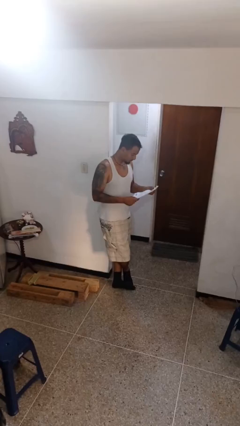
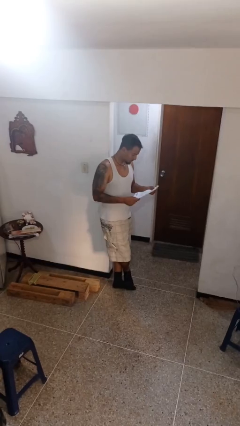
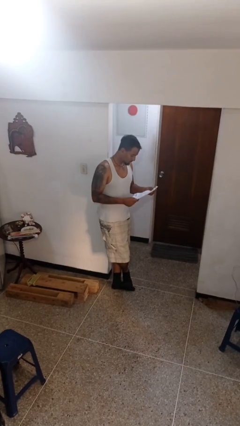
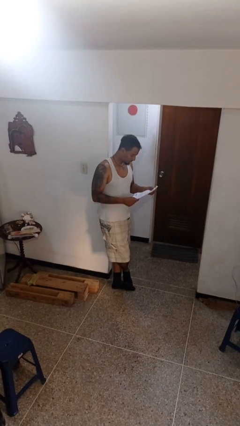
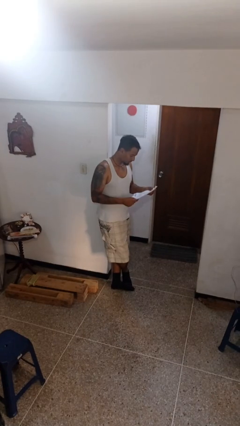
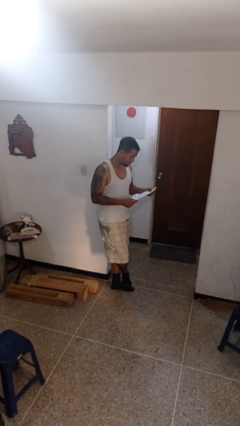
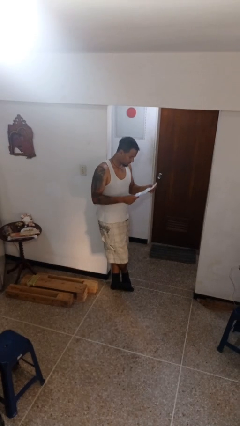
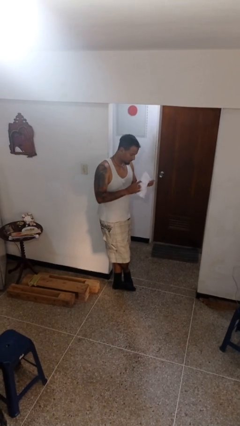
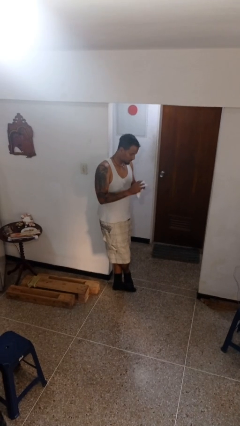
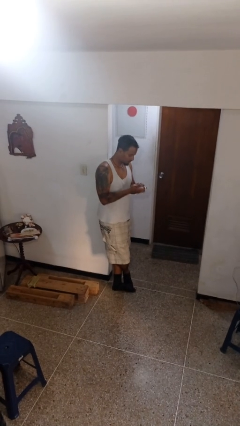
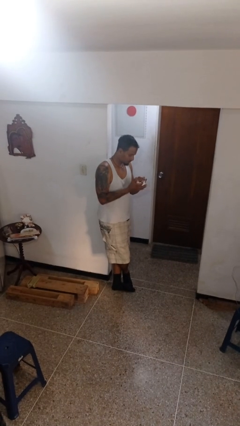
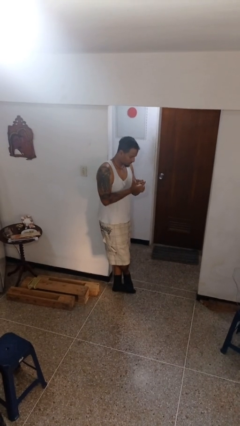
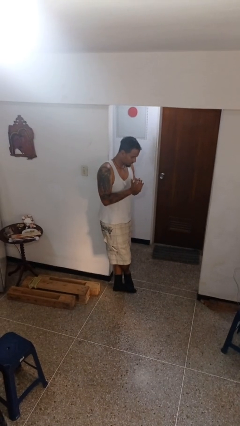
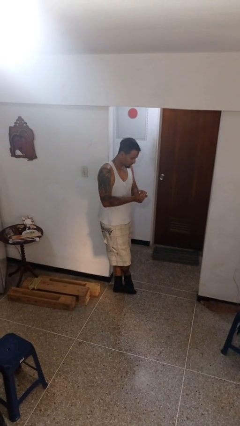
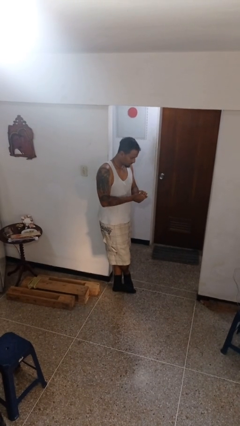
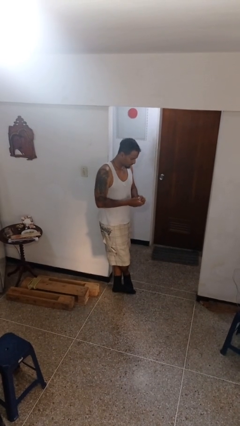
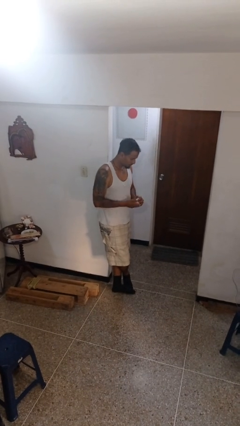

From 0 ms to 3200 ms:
person crumples paper

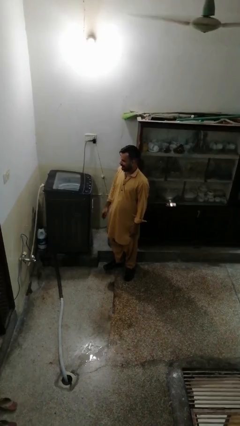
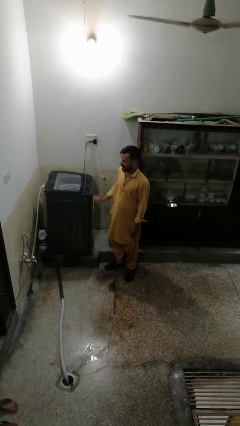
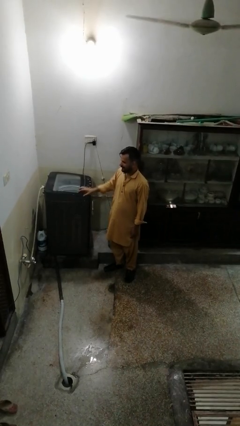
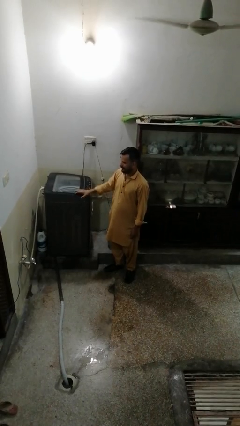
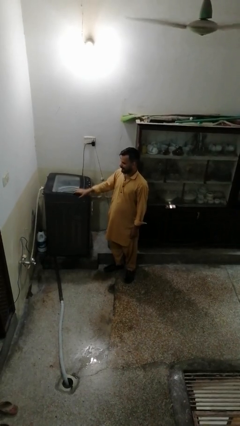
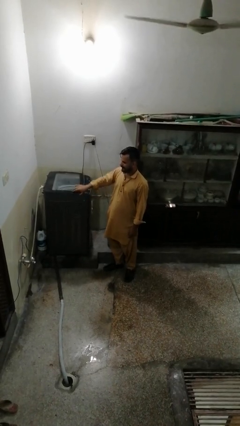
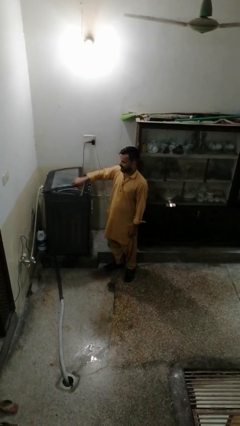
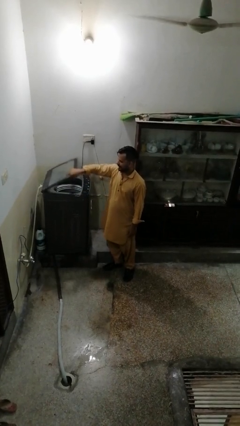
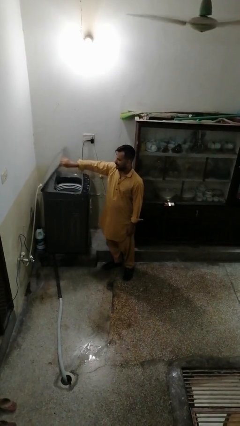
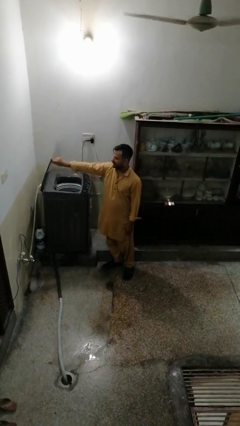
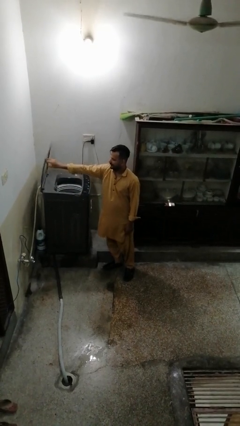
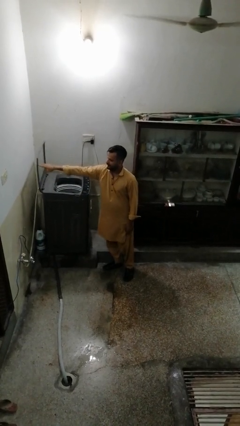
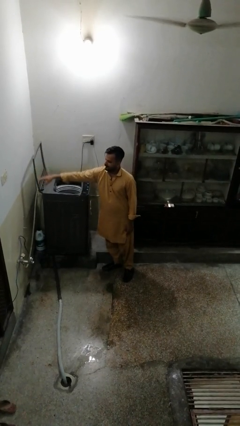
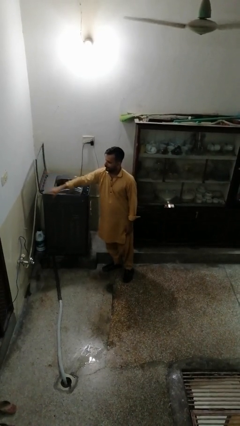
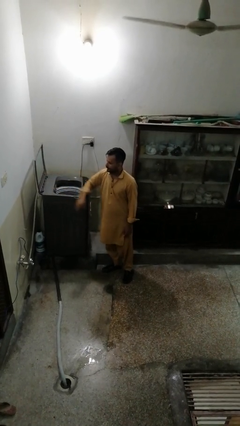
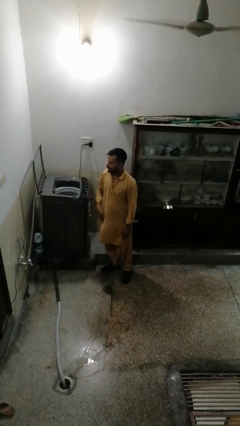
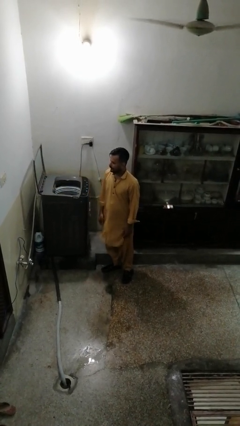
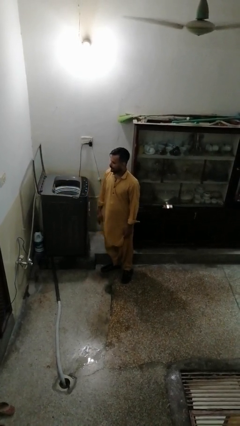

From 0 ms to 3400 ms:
person opens clothes washer

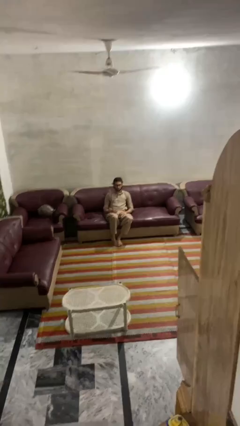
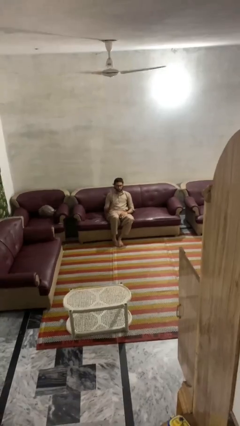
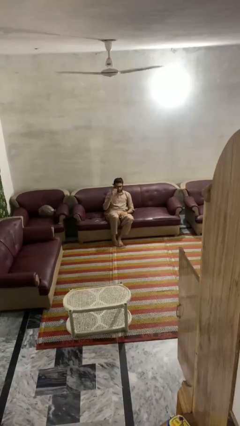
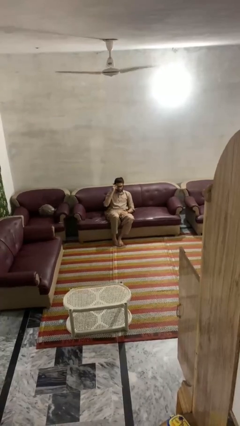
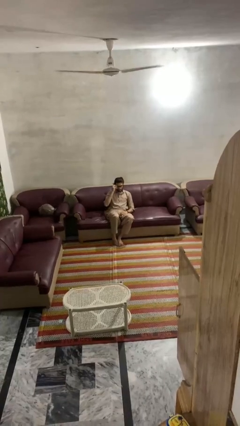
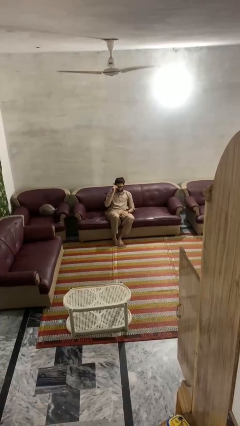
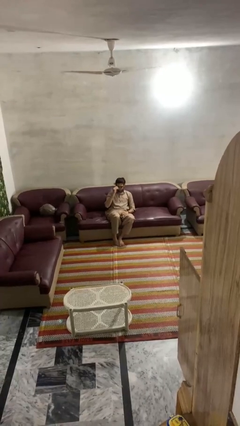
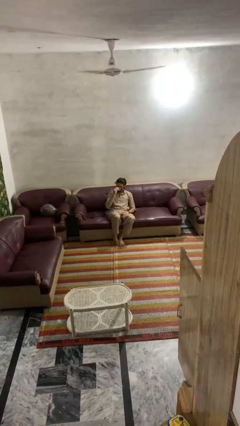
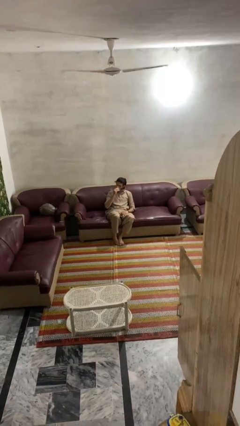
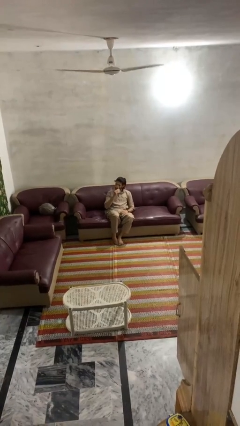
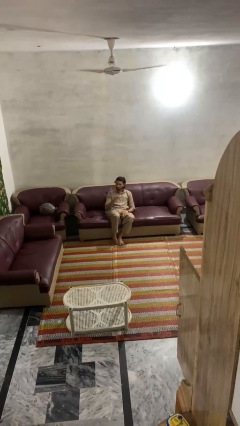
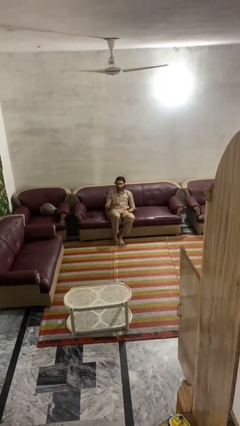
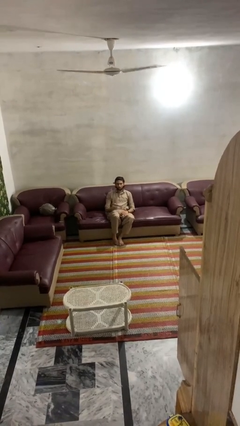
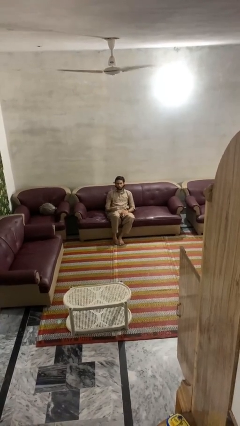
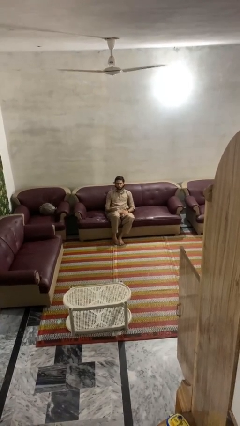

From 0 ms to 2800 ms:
person takes off glasses

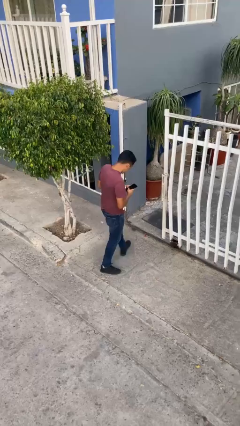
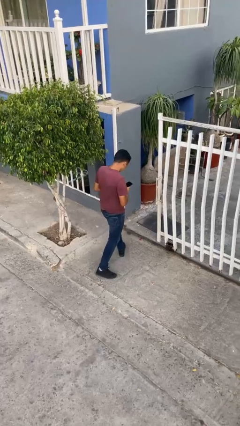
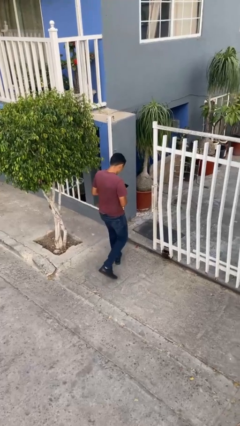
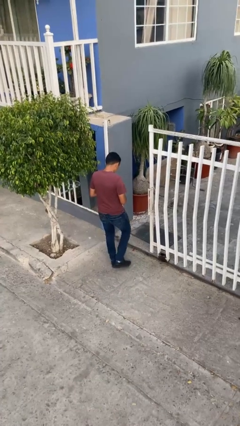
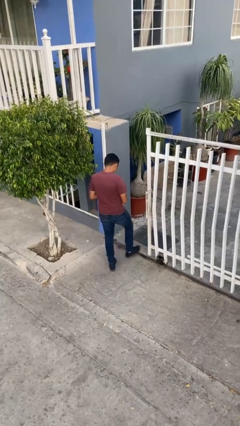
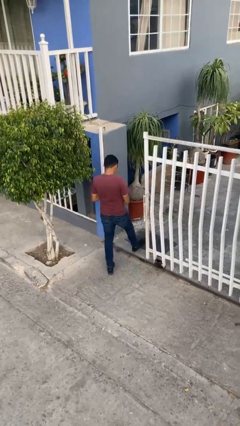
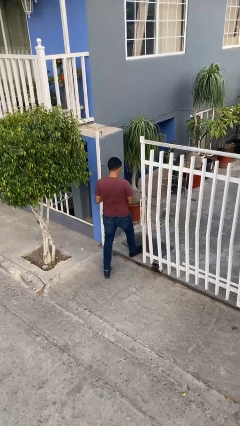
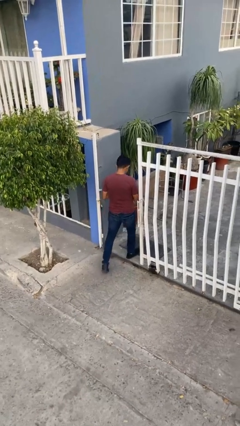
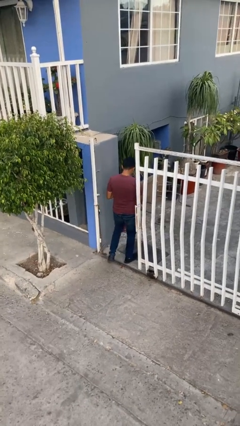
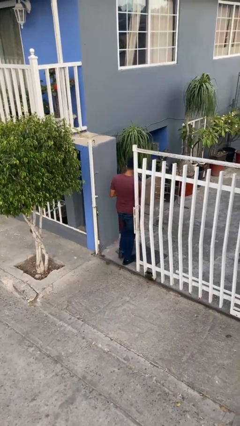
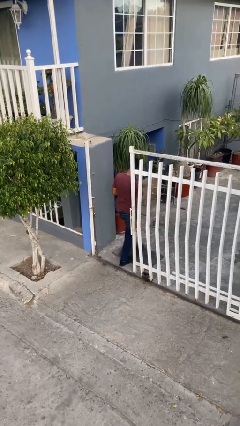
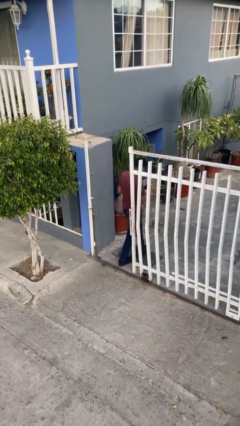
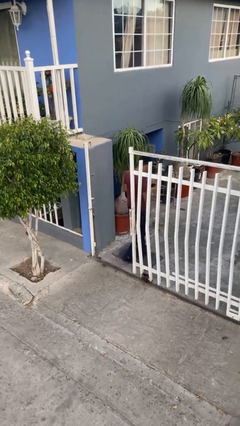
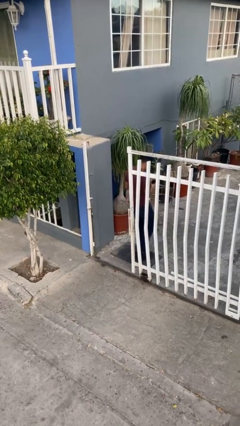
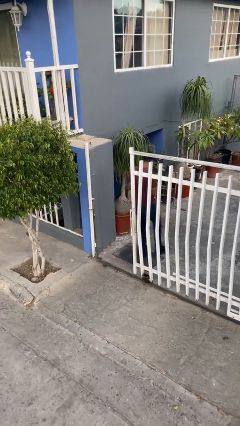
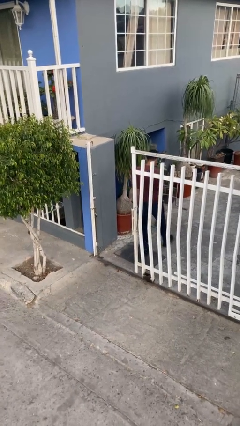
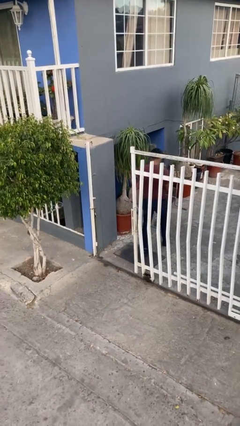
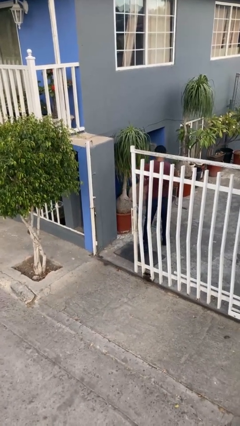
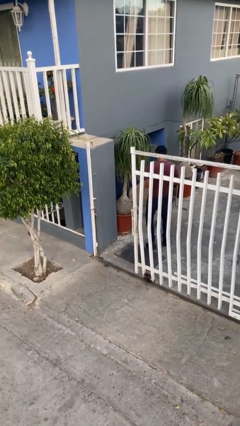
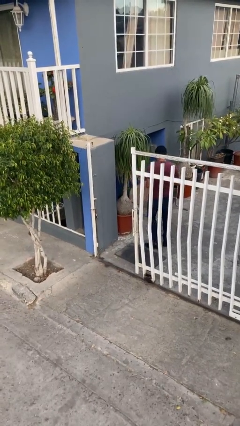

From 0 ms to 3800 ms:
person exits scene through structure

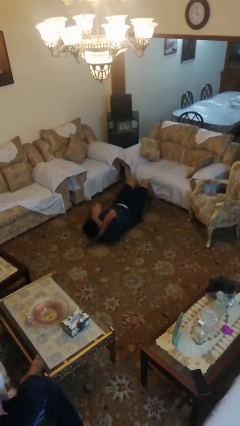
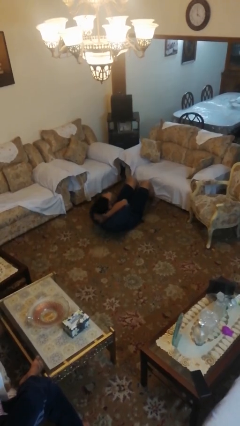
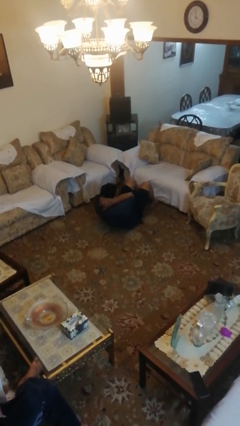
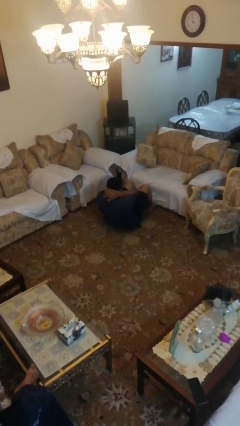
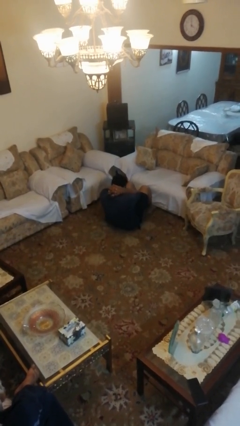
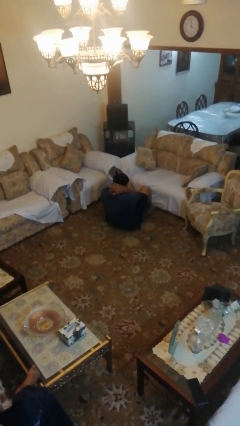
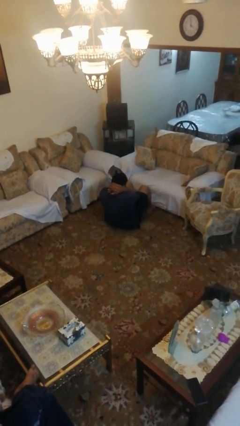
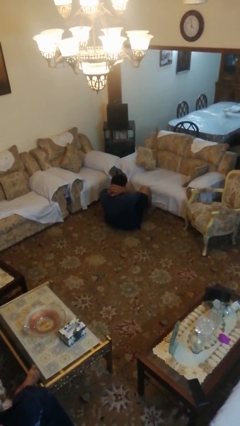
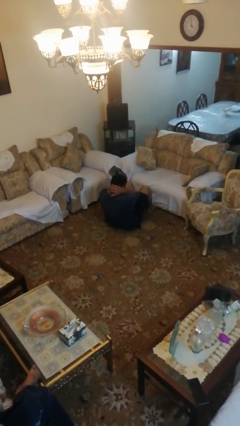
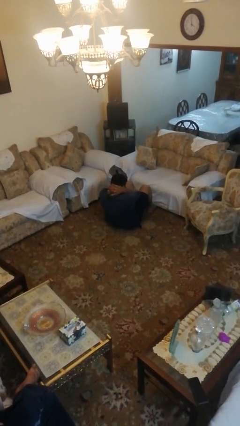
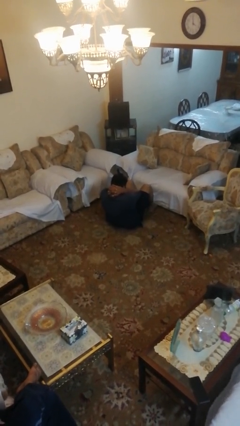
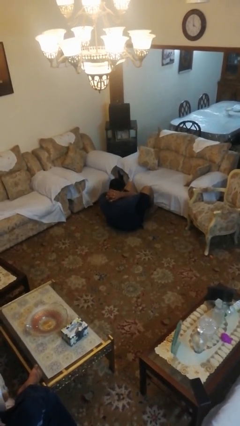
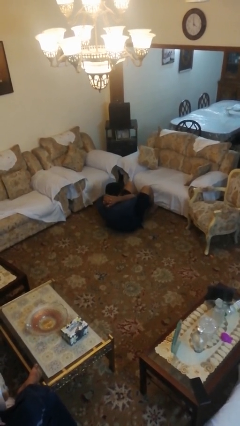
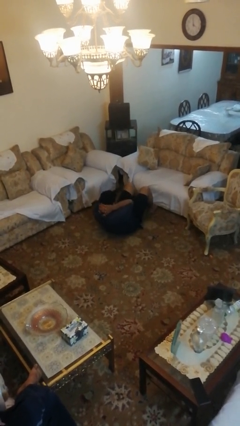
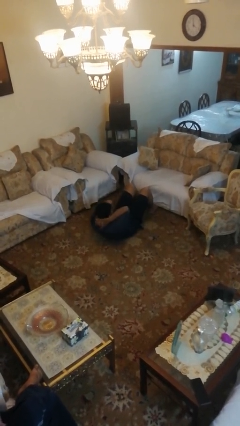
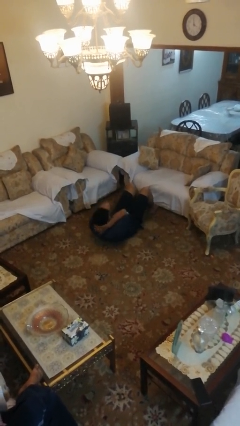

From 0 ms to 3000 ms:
person exercises with situp

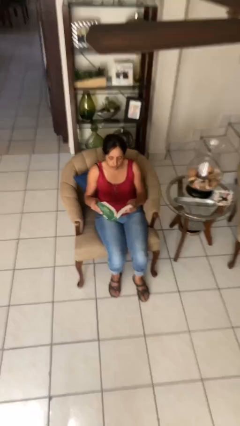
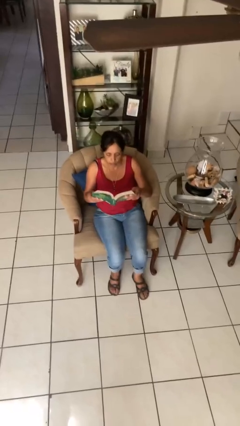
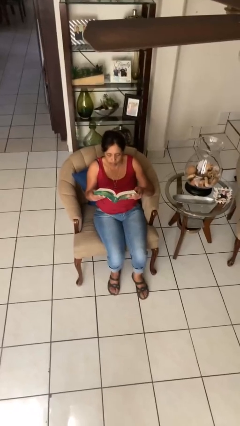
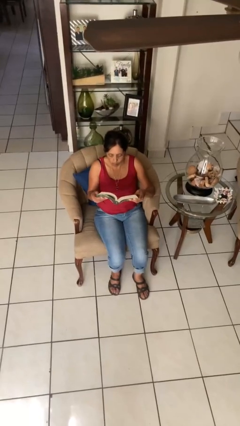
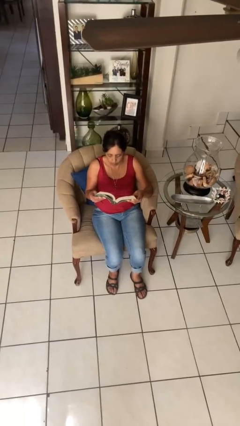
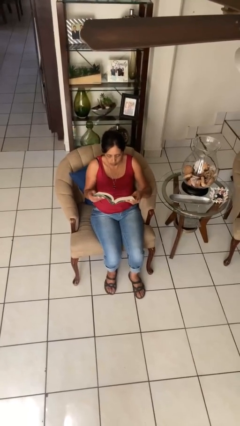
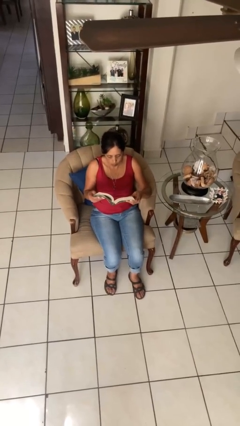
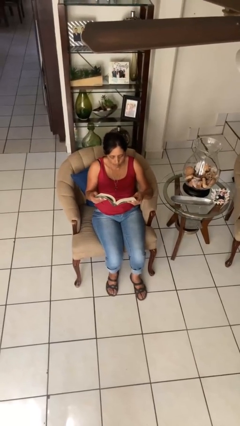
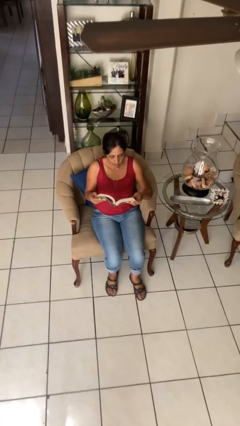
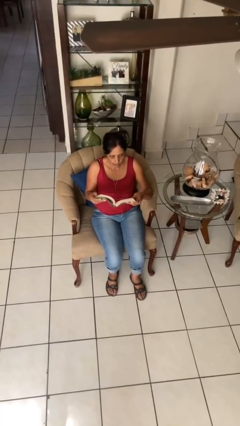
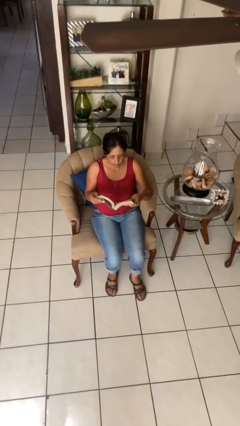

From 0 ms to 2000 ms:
person reads book
